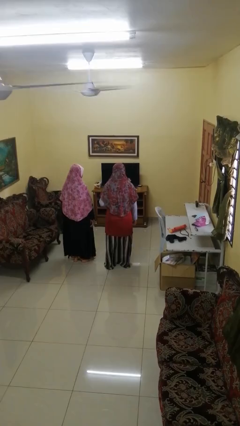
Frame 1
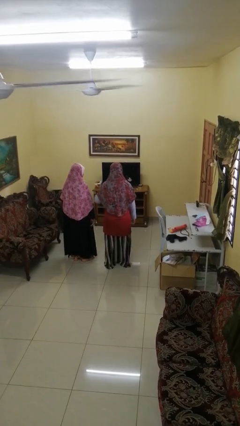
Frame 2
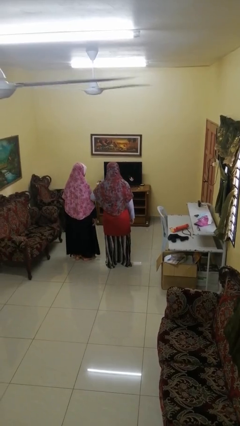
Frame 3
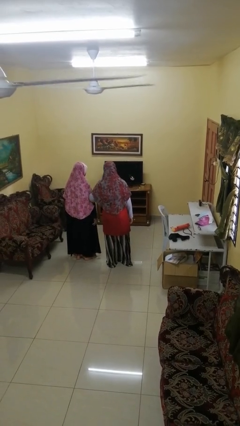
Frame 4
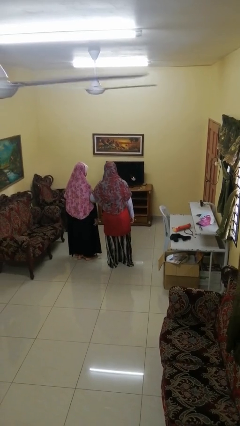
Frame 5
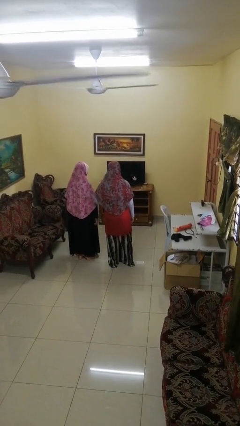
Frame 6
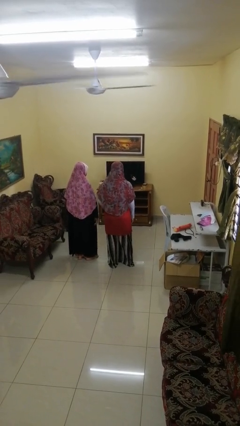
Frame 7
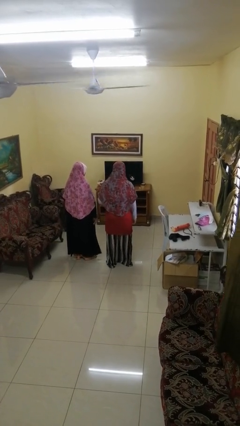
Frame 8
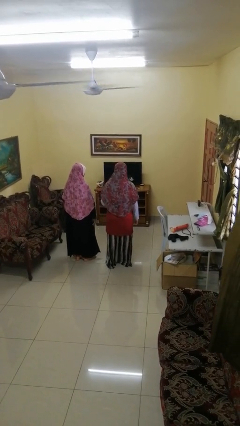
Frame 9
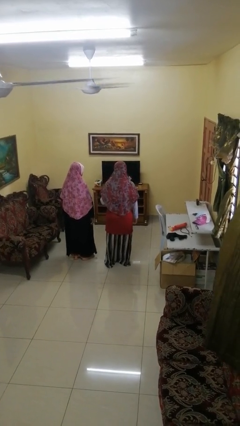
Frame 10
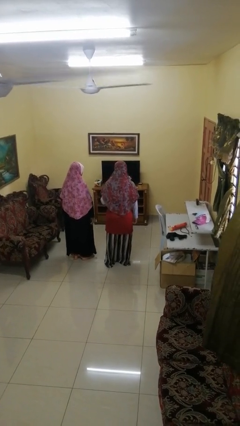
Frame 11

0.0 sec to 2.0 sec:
person nudges person with elbow

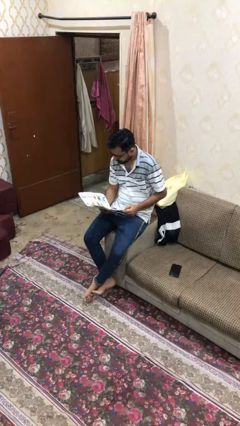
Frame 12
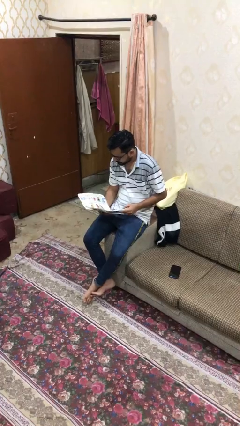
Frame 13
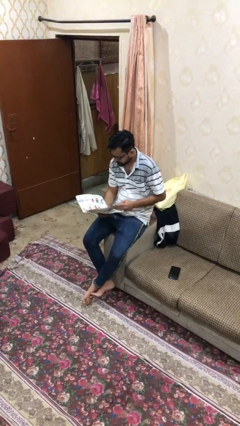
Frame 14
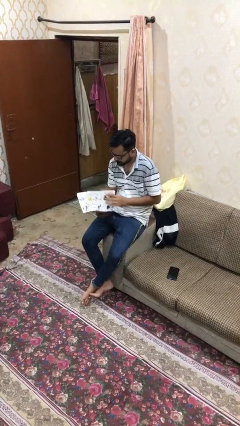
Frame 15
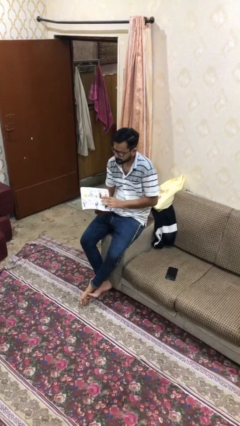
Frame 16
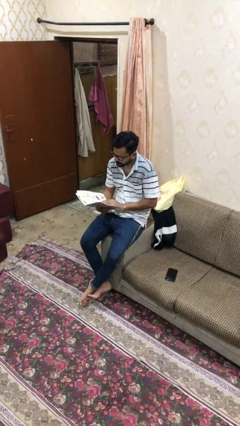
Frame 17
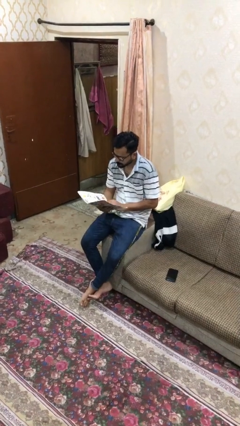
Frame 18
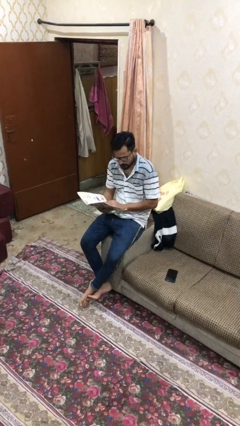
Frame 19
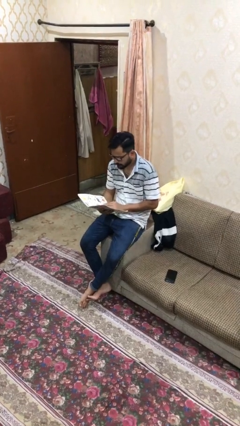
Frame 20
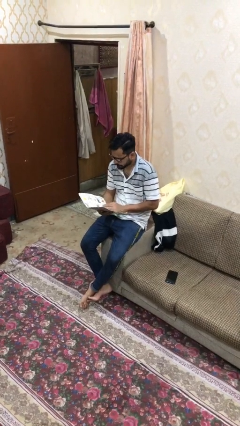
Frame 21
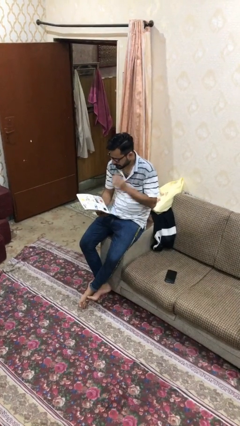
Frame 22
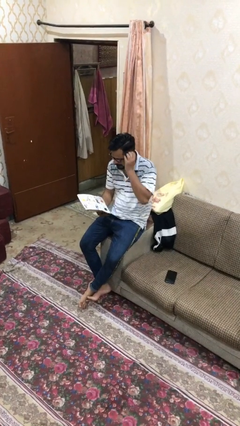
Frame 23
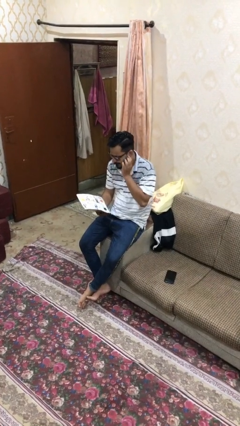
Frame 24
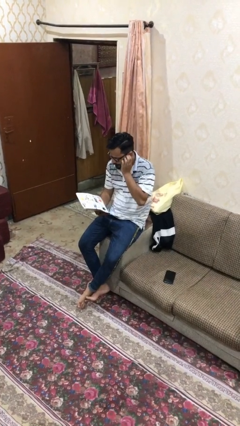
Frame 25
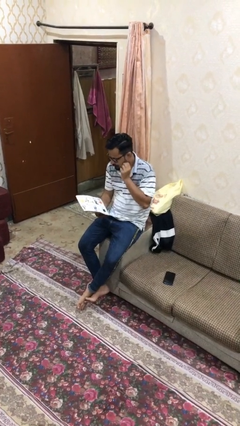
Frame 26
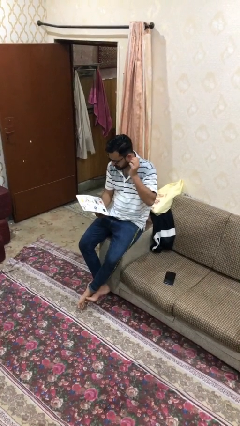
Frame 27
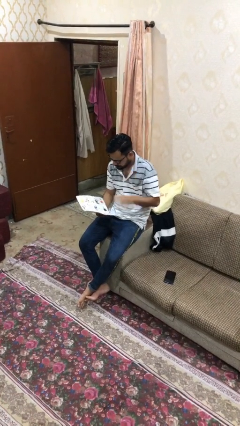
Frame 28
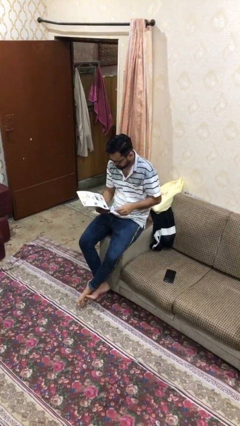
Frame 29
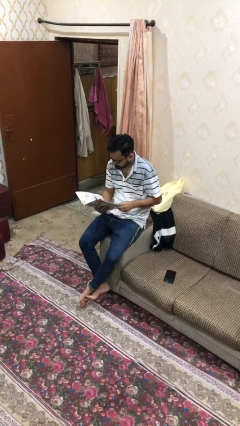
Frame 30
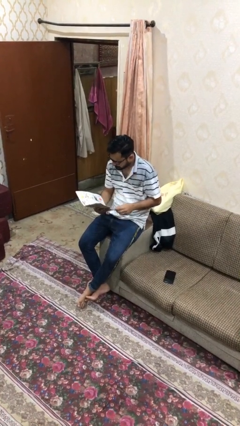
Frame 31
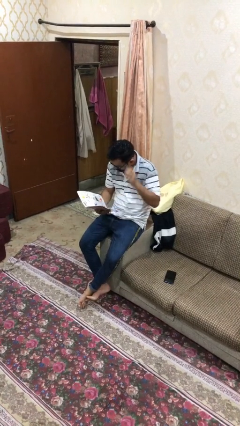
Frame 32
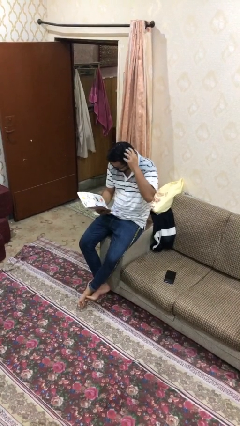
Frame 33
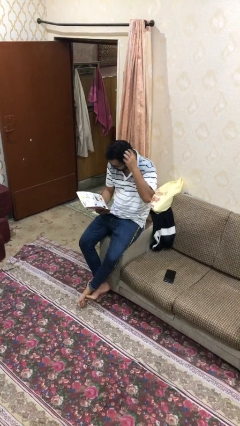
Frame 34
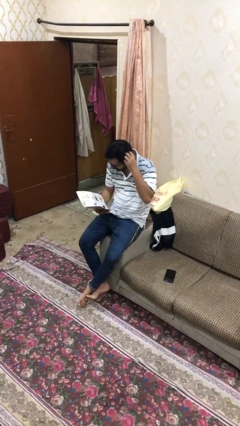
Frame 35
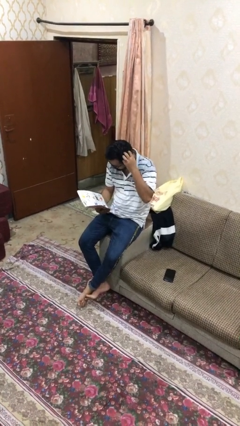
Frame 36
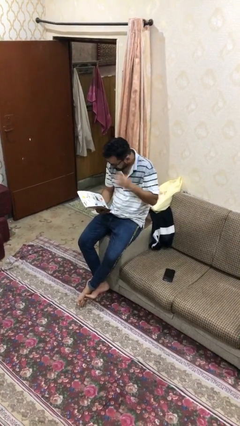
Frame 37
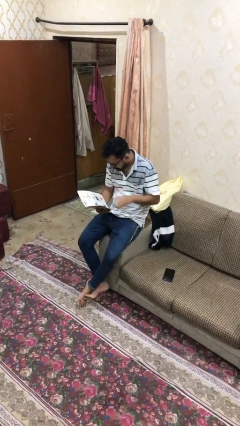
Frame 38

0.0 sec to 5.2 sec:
person reads document

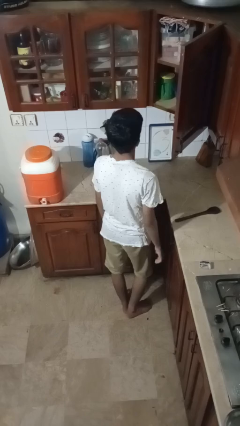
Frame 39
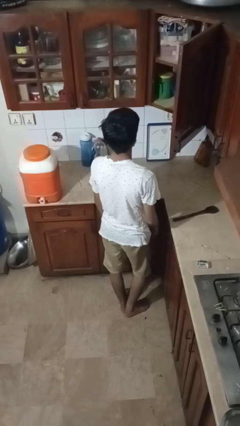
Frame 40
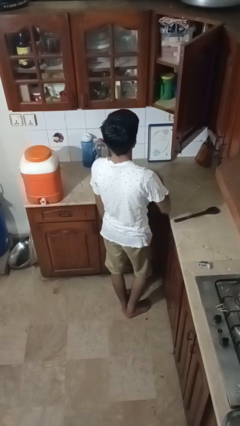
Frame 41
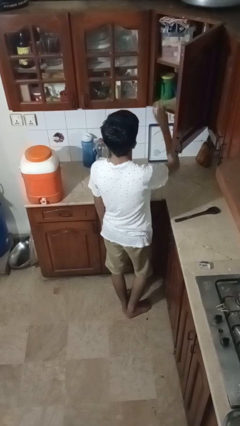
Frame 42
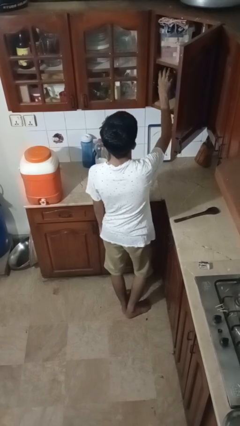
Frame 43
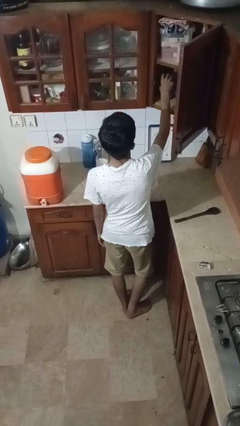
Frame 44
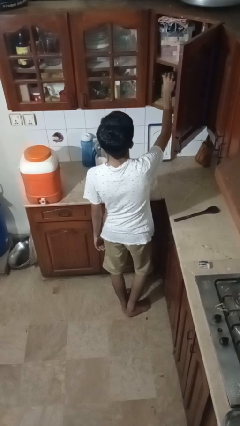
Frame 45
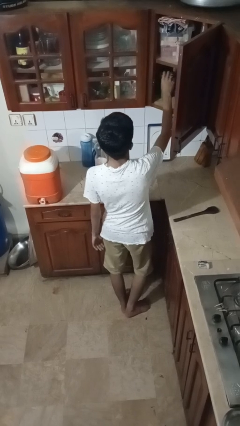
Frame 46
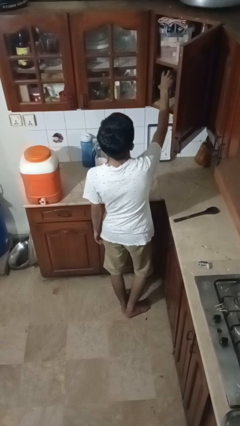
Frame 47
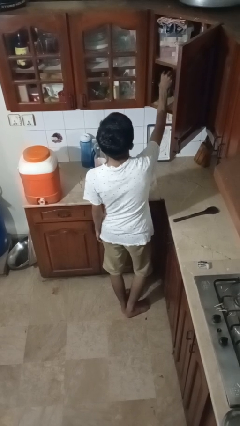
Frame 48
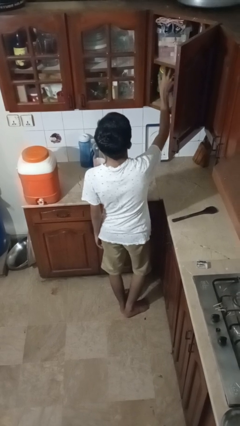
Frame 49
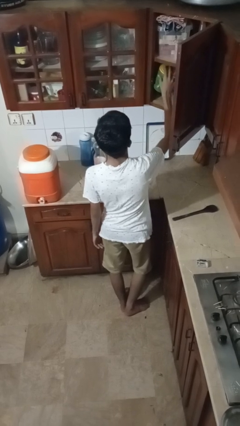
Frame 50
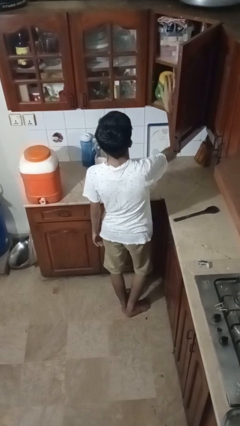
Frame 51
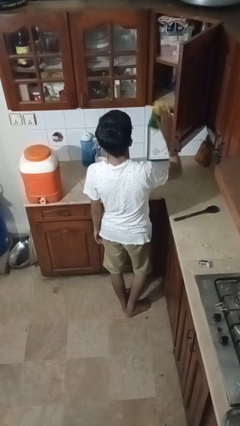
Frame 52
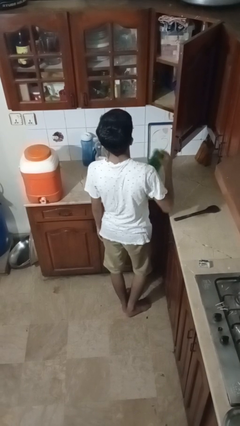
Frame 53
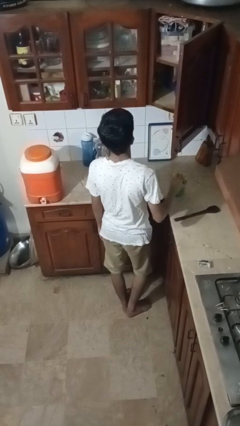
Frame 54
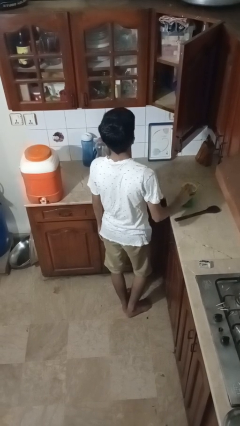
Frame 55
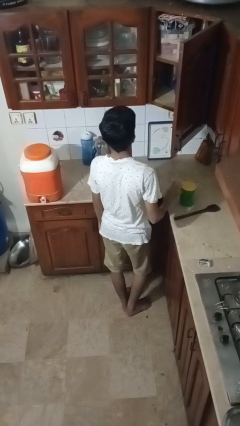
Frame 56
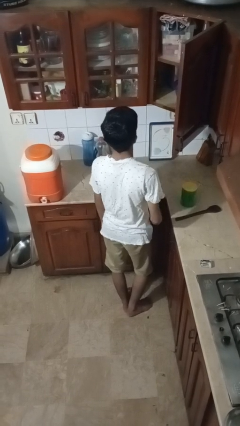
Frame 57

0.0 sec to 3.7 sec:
person takes object from cabinet

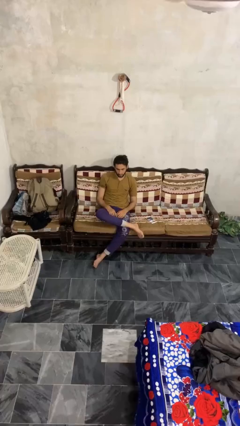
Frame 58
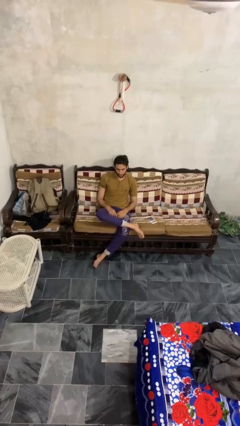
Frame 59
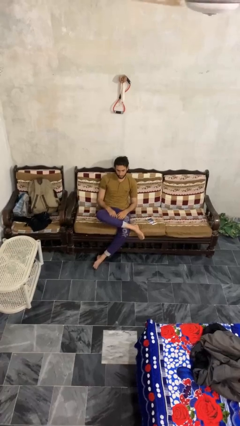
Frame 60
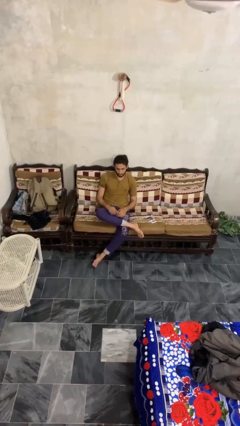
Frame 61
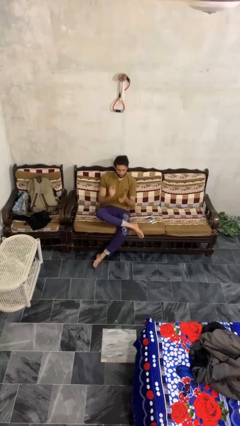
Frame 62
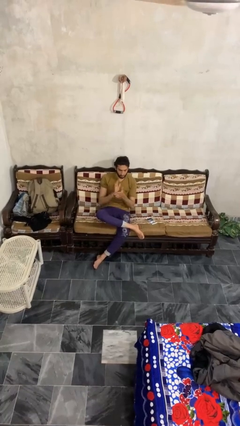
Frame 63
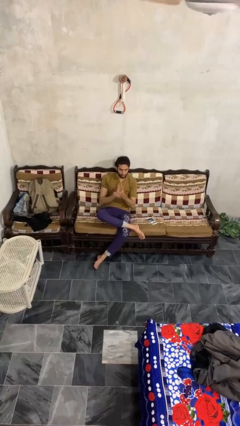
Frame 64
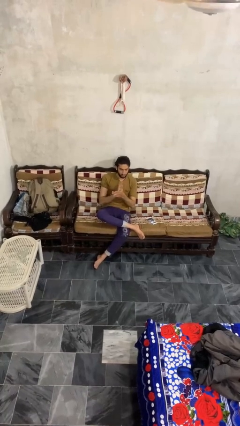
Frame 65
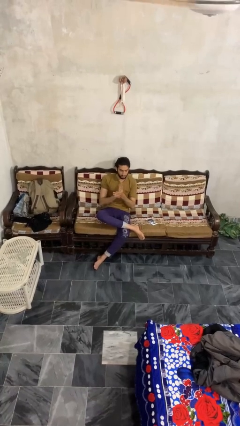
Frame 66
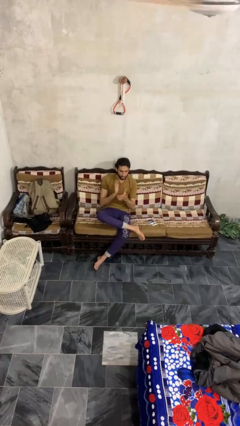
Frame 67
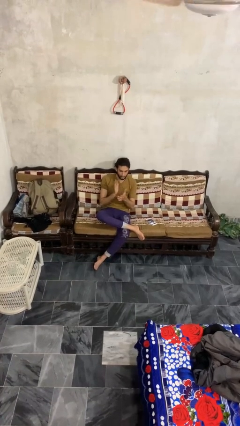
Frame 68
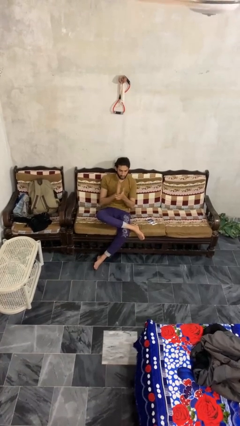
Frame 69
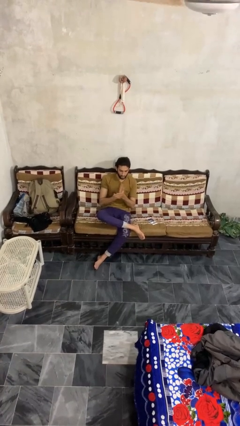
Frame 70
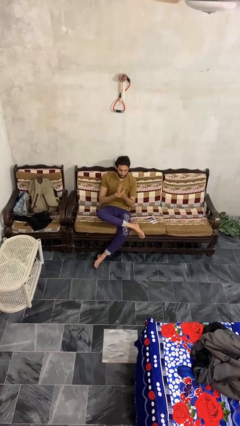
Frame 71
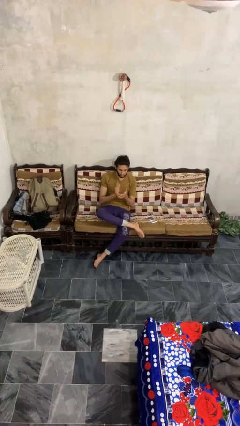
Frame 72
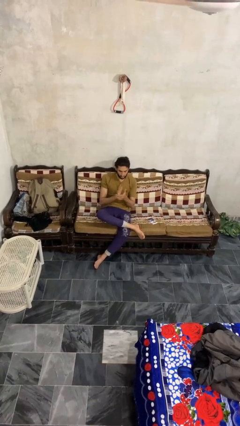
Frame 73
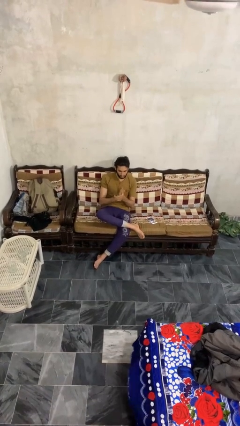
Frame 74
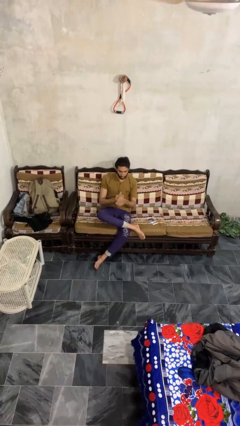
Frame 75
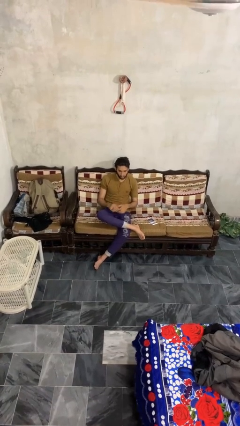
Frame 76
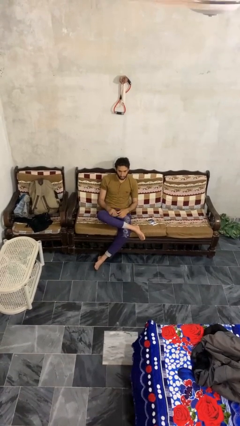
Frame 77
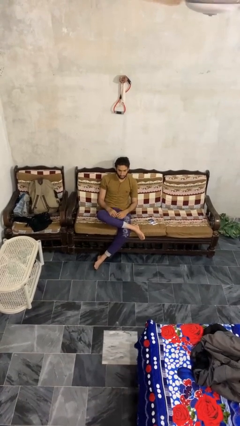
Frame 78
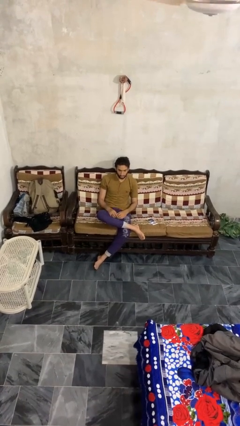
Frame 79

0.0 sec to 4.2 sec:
person claps hands

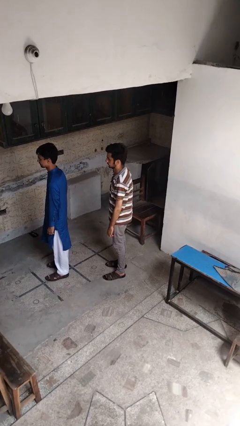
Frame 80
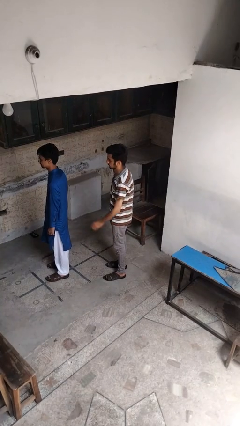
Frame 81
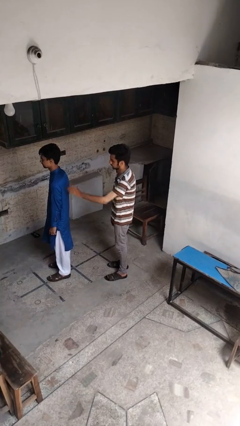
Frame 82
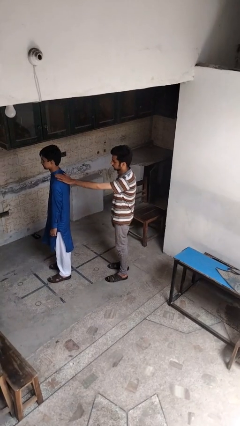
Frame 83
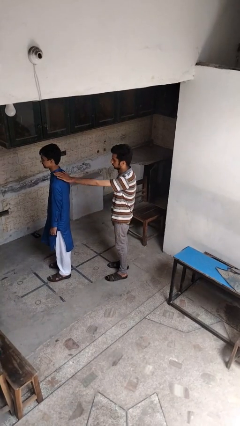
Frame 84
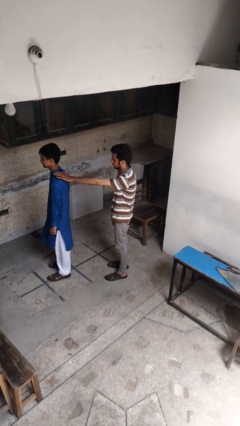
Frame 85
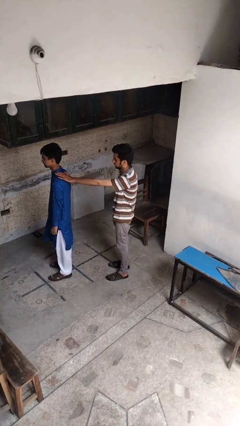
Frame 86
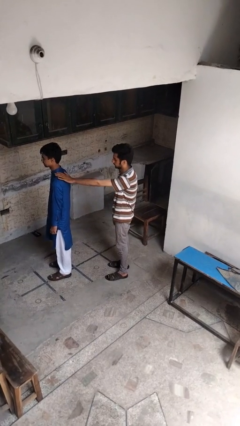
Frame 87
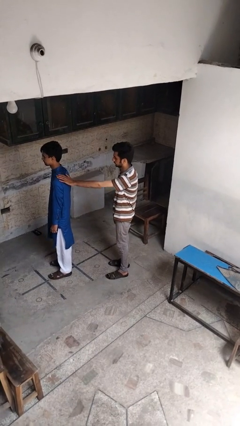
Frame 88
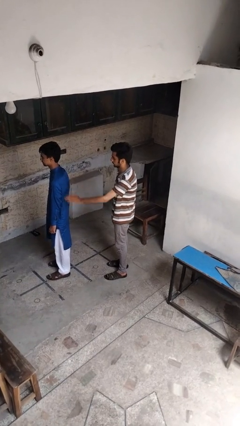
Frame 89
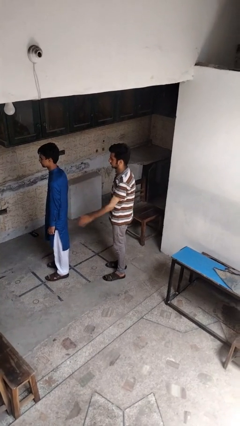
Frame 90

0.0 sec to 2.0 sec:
person touches back of person

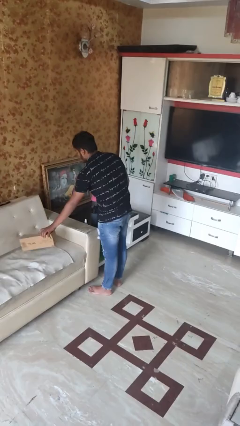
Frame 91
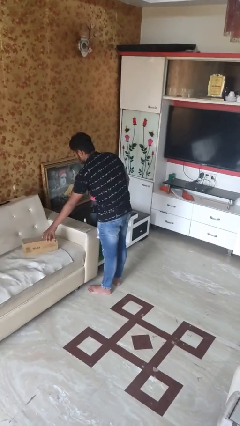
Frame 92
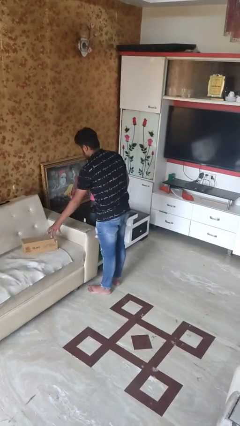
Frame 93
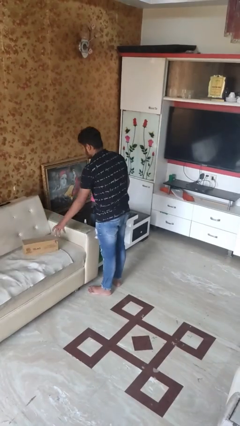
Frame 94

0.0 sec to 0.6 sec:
person puts down object on couch
